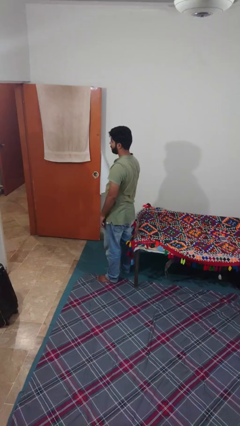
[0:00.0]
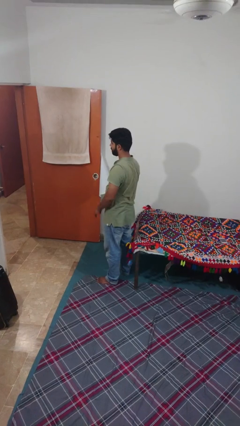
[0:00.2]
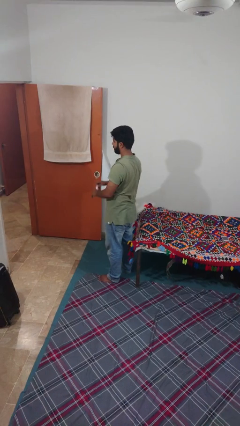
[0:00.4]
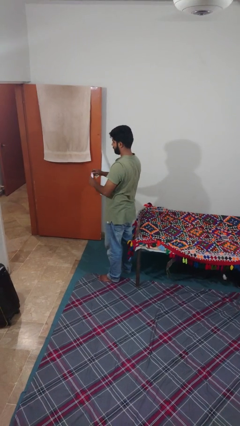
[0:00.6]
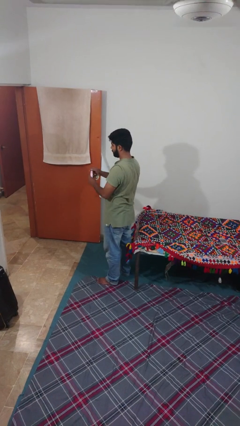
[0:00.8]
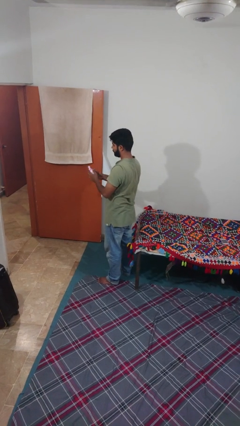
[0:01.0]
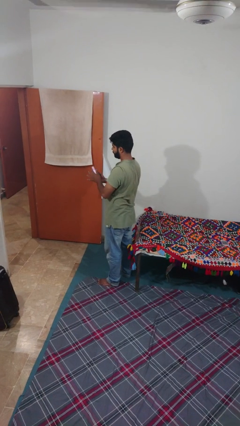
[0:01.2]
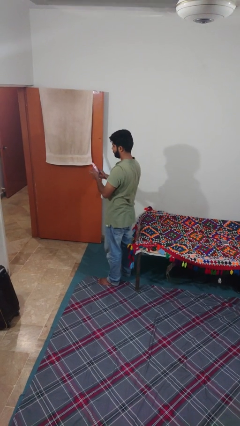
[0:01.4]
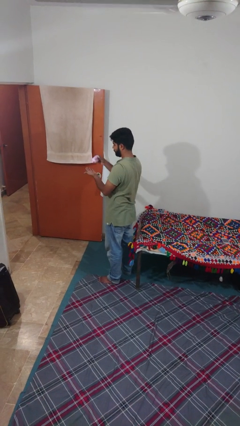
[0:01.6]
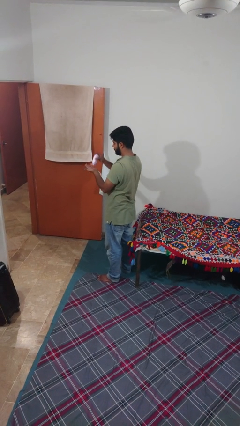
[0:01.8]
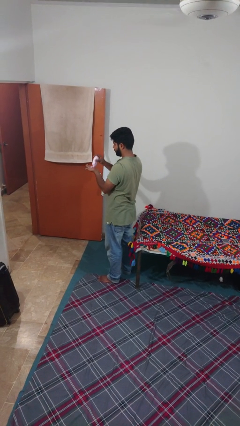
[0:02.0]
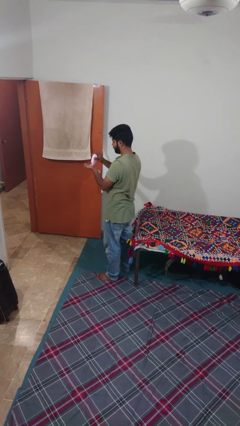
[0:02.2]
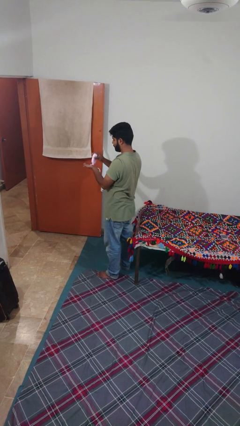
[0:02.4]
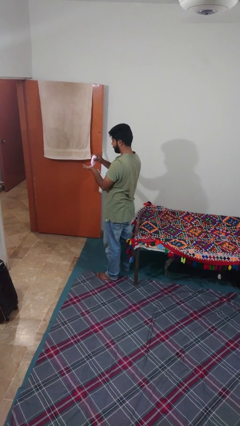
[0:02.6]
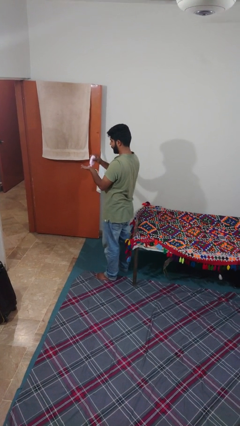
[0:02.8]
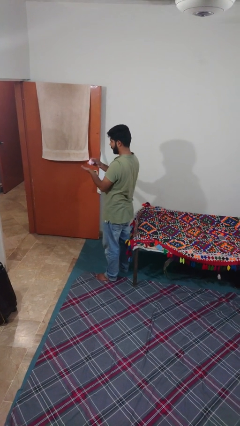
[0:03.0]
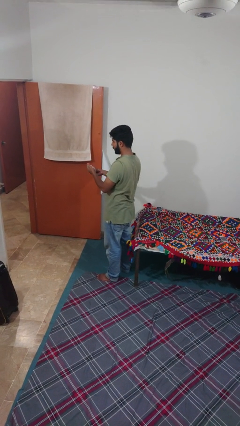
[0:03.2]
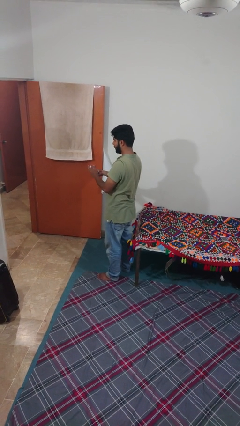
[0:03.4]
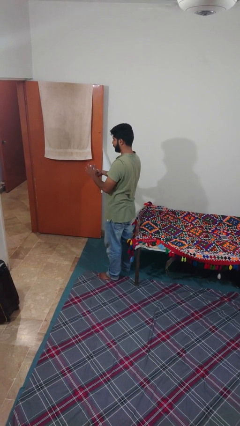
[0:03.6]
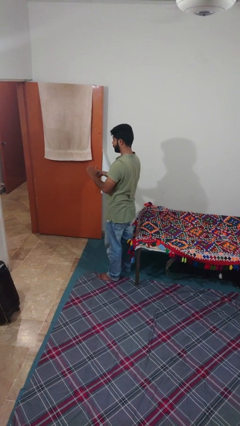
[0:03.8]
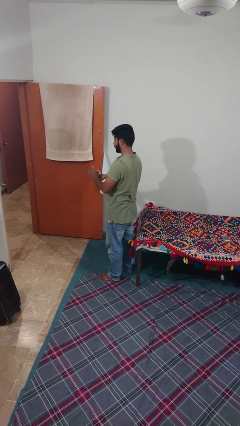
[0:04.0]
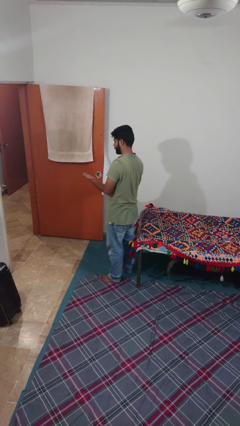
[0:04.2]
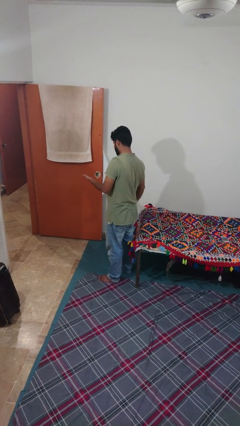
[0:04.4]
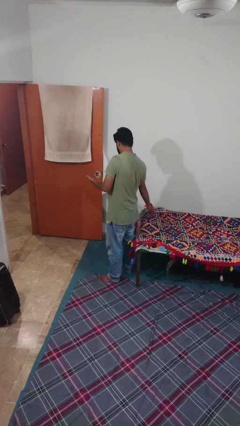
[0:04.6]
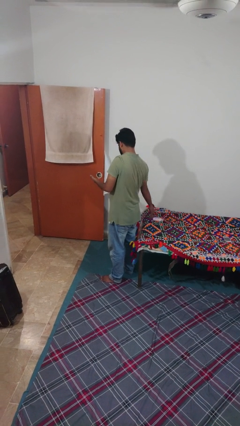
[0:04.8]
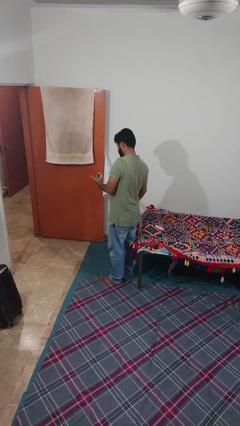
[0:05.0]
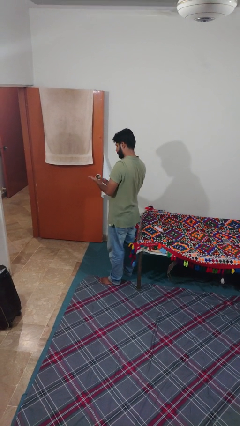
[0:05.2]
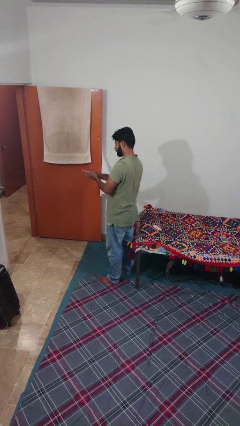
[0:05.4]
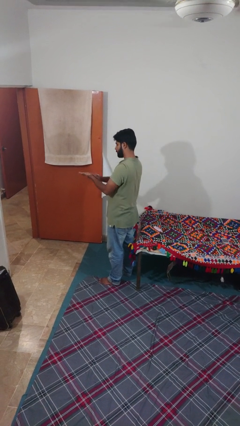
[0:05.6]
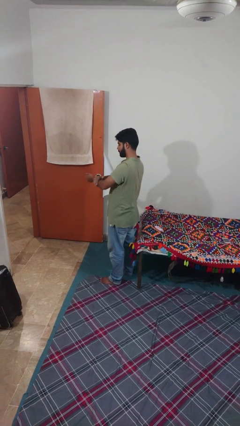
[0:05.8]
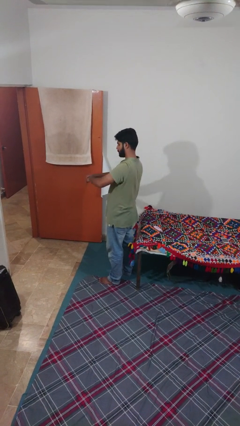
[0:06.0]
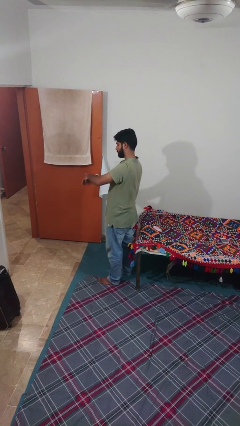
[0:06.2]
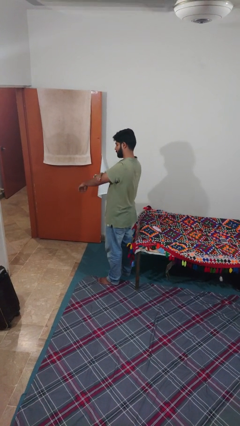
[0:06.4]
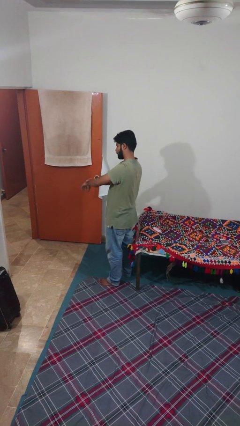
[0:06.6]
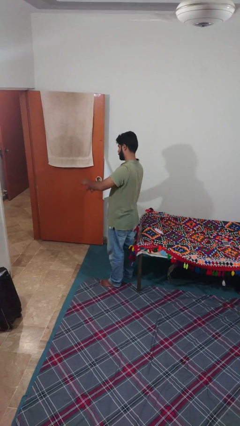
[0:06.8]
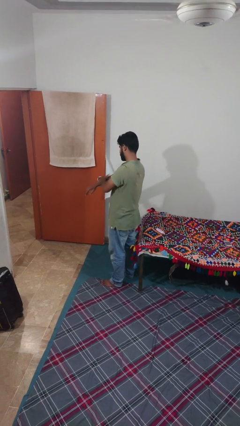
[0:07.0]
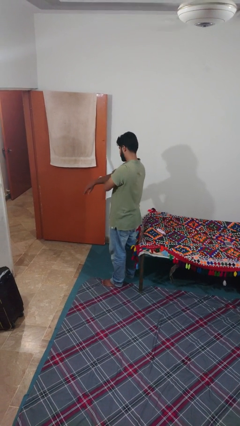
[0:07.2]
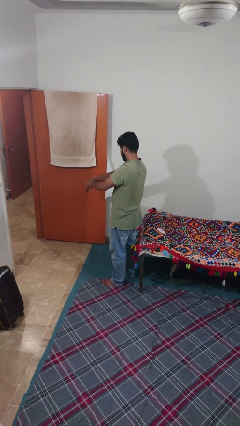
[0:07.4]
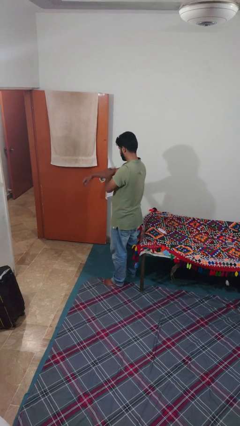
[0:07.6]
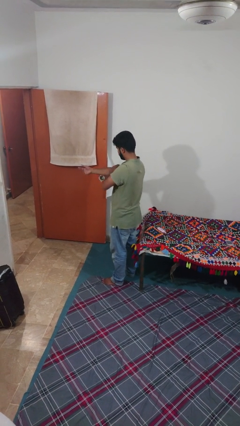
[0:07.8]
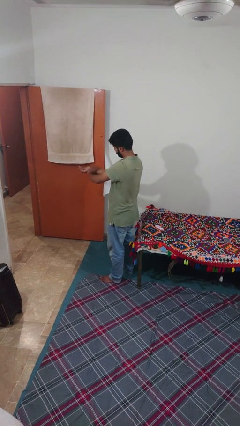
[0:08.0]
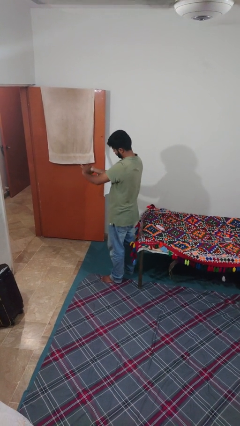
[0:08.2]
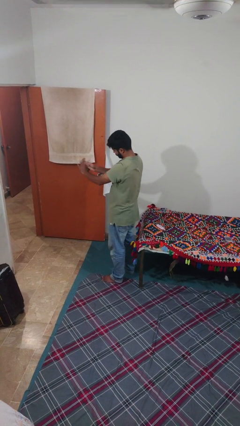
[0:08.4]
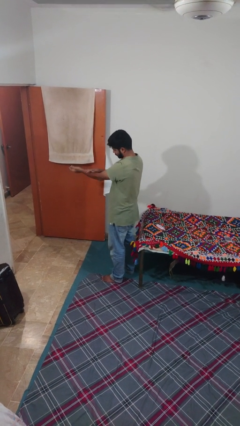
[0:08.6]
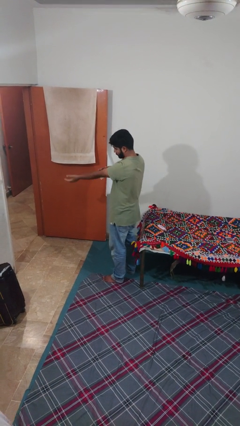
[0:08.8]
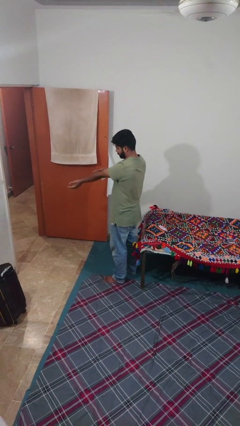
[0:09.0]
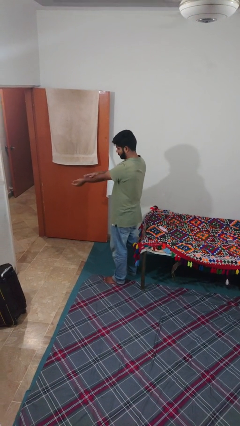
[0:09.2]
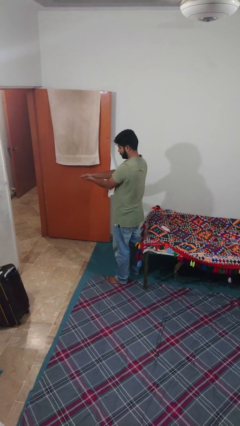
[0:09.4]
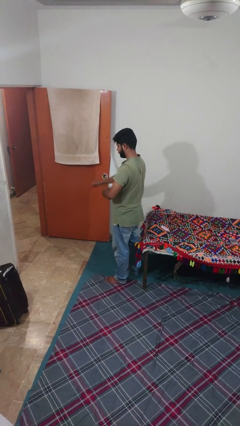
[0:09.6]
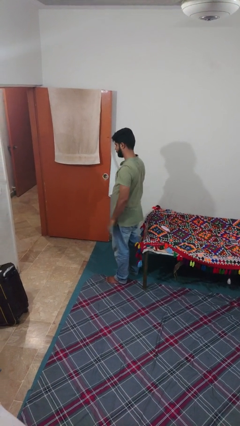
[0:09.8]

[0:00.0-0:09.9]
person applies sunscreen

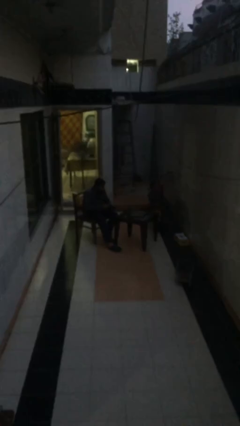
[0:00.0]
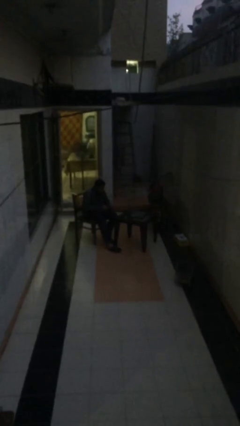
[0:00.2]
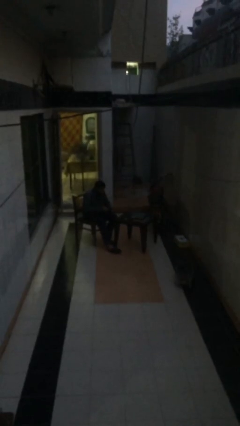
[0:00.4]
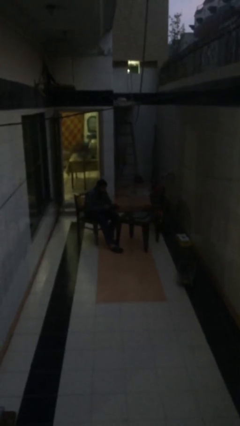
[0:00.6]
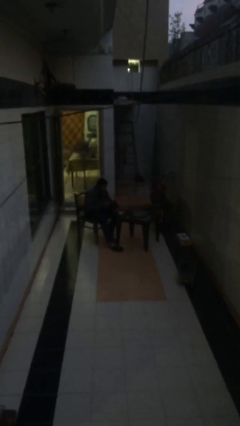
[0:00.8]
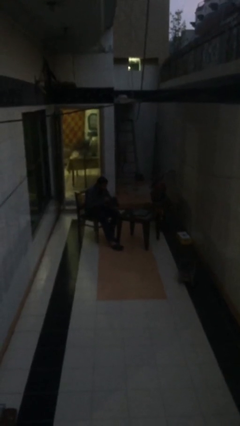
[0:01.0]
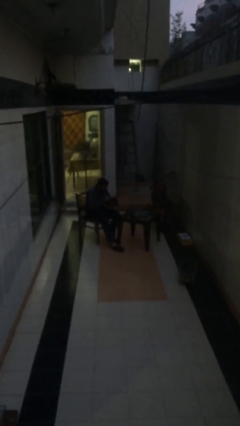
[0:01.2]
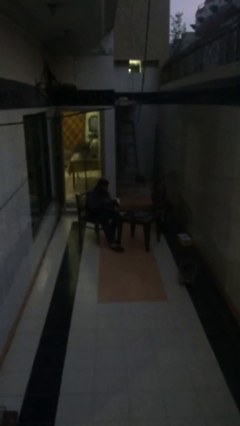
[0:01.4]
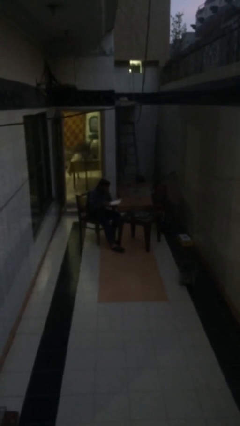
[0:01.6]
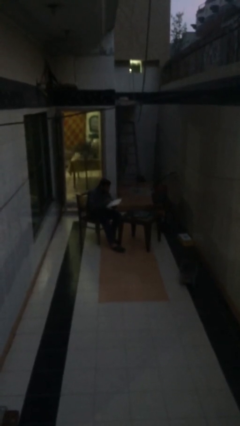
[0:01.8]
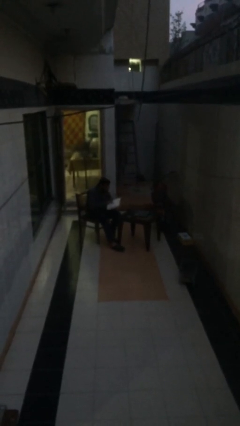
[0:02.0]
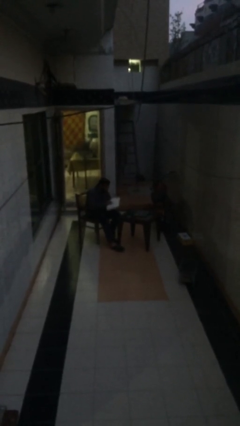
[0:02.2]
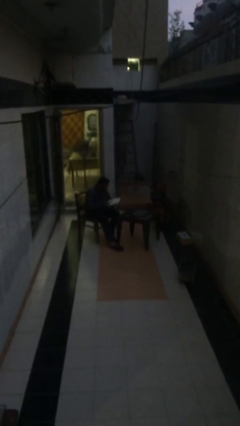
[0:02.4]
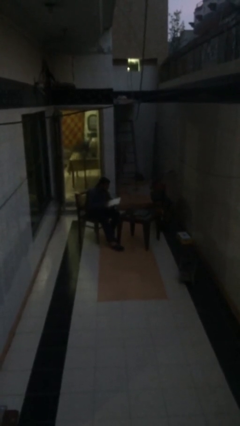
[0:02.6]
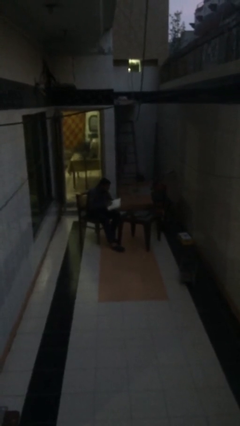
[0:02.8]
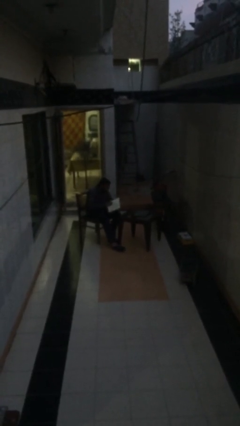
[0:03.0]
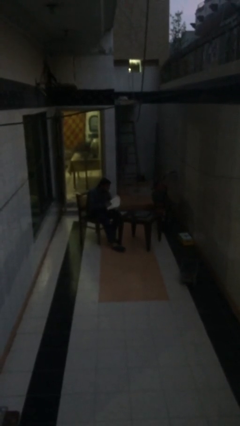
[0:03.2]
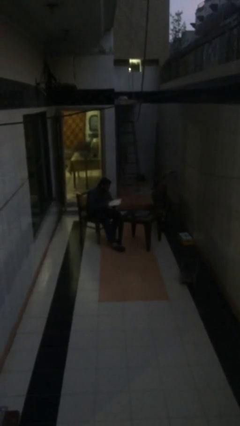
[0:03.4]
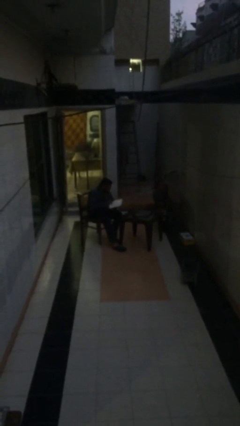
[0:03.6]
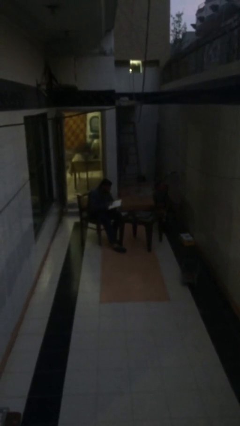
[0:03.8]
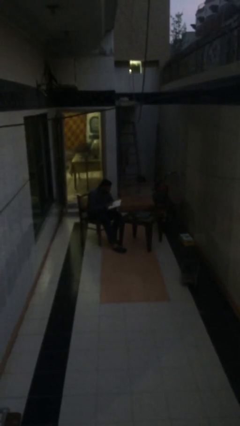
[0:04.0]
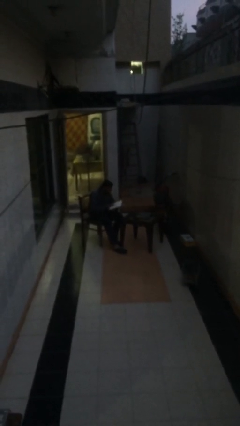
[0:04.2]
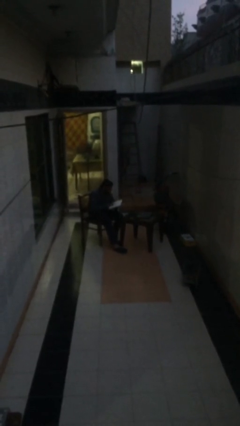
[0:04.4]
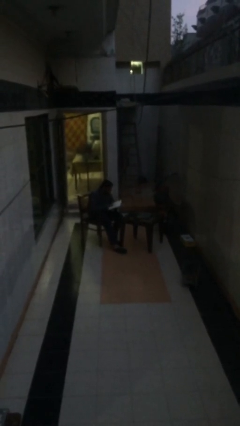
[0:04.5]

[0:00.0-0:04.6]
person reads document

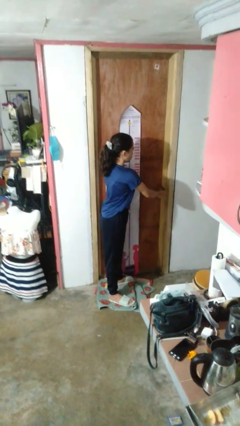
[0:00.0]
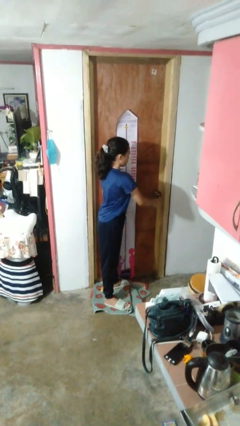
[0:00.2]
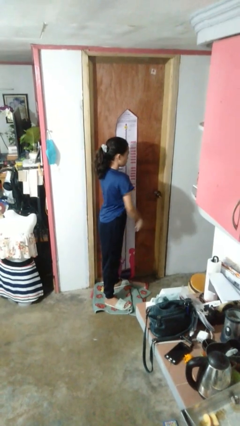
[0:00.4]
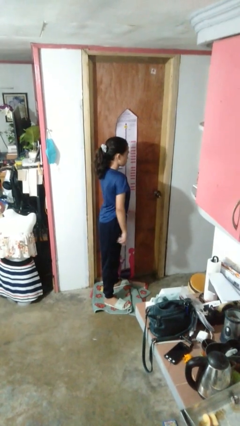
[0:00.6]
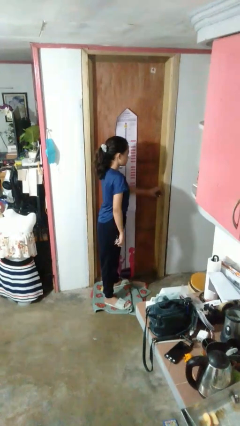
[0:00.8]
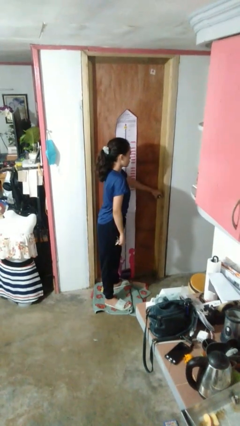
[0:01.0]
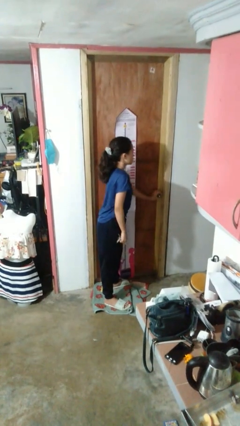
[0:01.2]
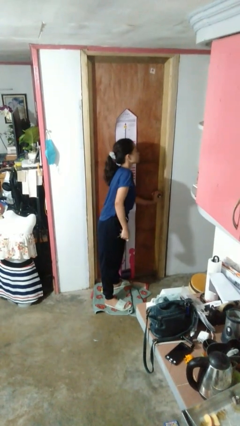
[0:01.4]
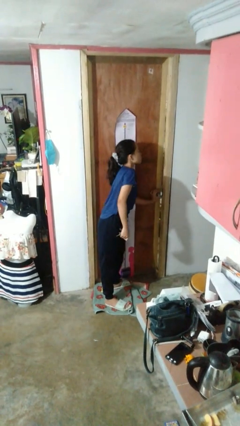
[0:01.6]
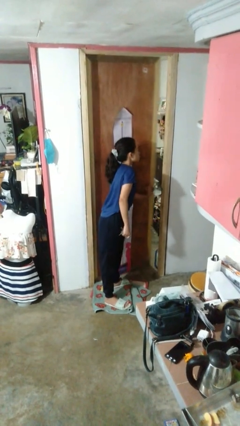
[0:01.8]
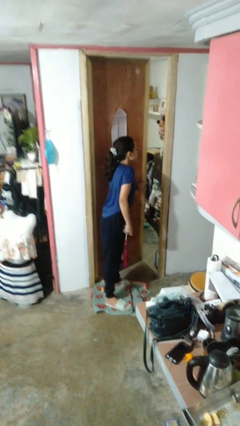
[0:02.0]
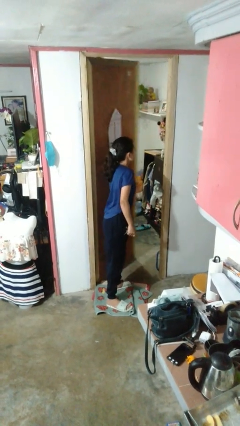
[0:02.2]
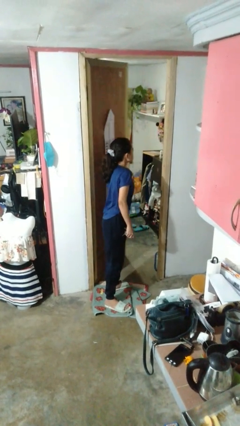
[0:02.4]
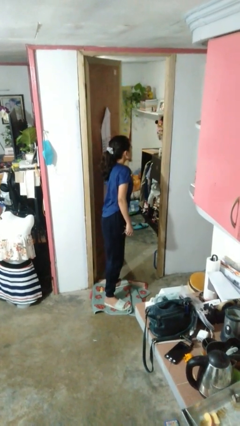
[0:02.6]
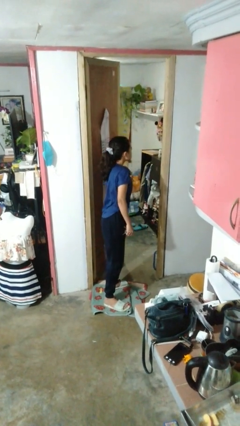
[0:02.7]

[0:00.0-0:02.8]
person opens facility door

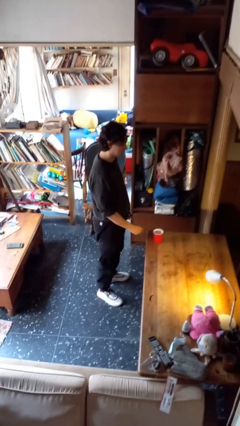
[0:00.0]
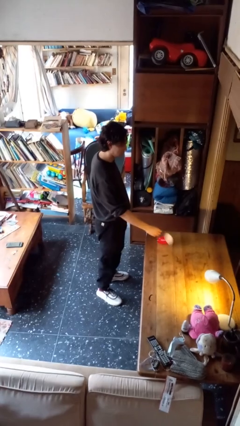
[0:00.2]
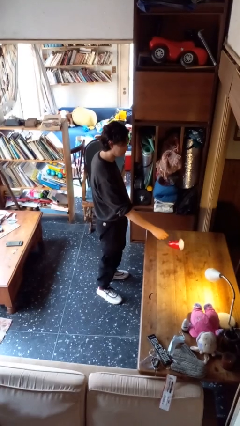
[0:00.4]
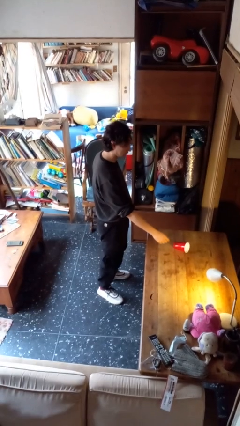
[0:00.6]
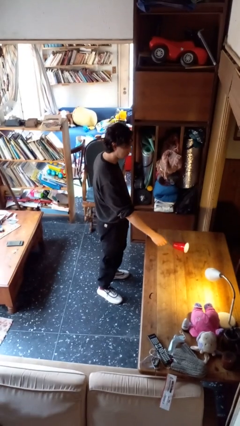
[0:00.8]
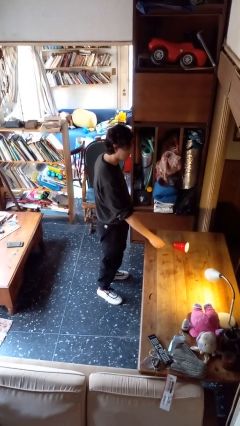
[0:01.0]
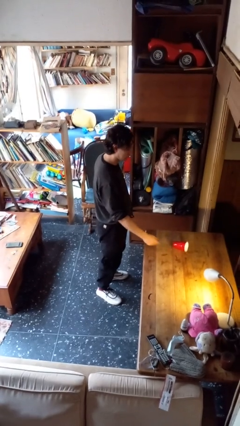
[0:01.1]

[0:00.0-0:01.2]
person knocks over glass
